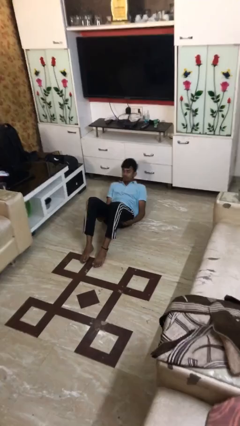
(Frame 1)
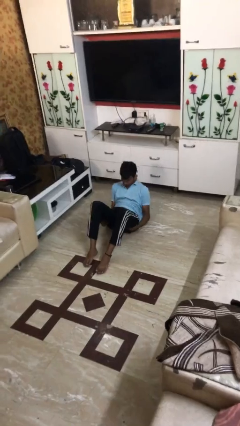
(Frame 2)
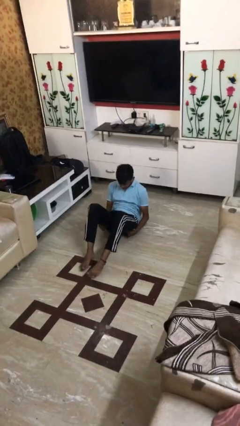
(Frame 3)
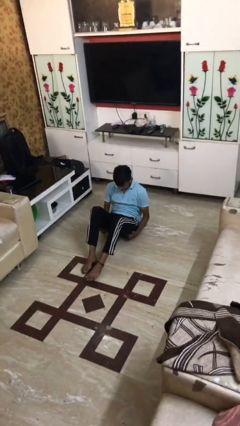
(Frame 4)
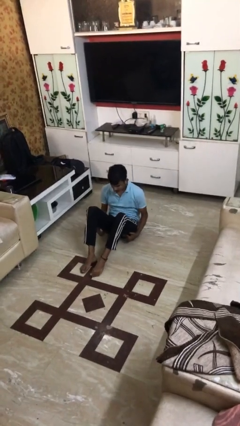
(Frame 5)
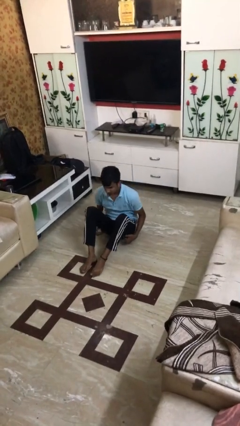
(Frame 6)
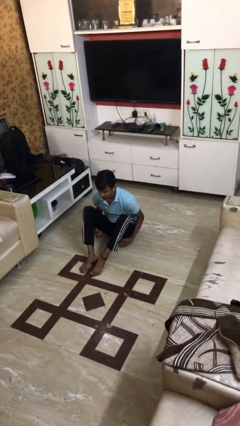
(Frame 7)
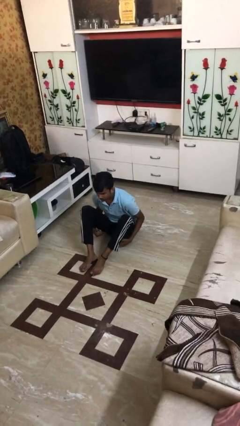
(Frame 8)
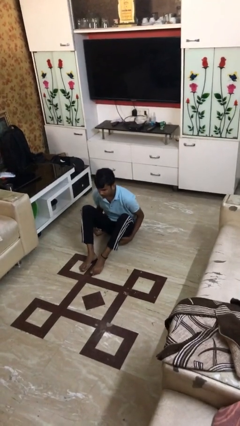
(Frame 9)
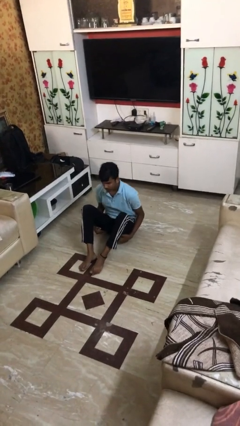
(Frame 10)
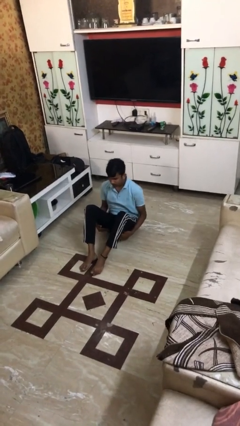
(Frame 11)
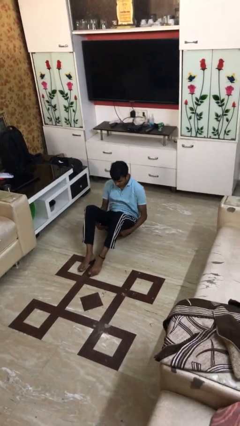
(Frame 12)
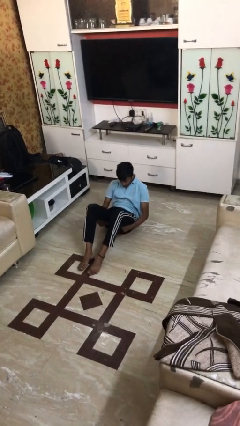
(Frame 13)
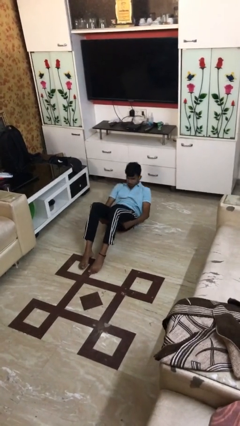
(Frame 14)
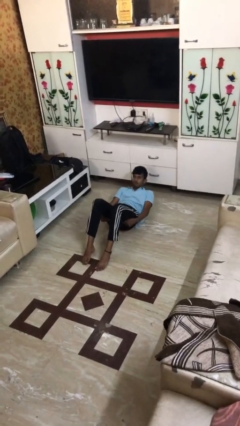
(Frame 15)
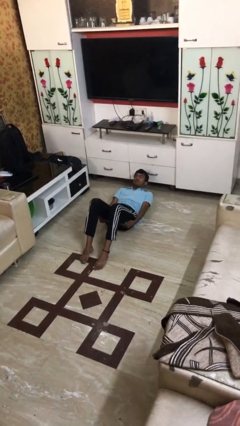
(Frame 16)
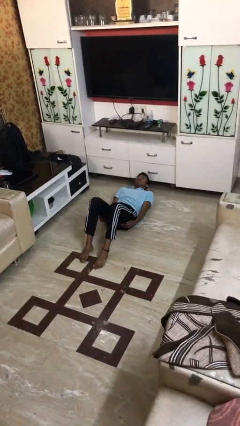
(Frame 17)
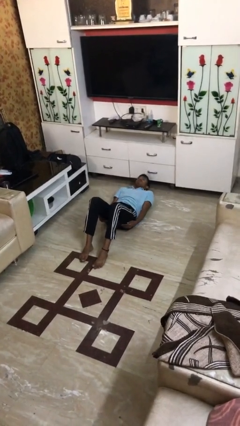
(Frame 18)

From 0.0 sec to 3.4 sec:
person exercises with situp

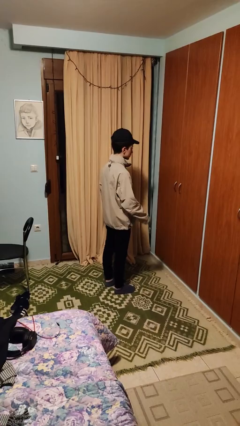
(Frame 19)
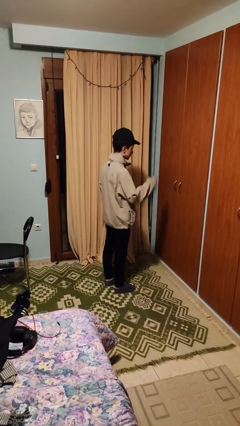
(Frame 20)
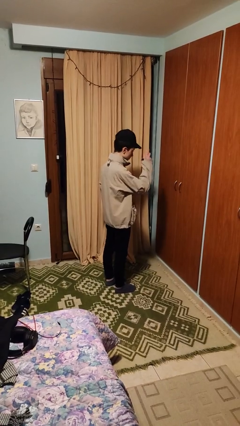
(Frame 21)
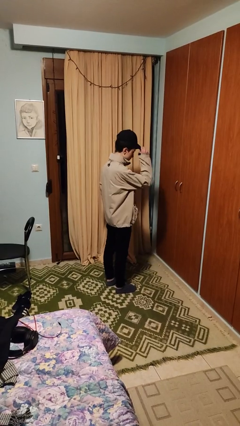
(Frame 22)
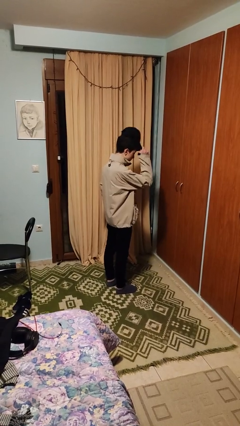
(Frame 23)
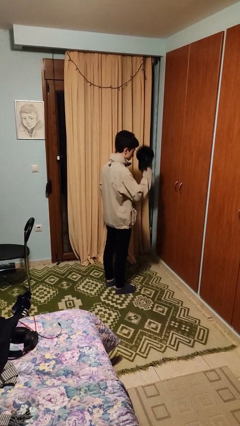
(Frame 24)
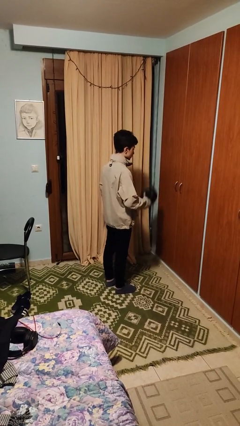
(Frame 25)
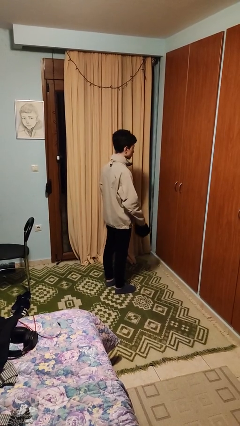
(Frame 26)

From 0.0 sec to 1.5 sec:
person takes off hat

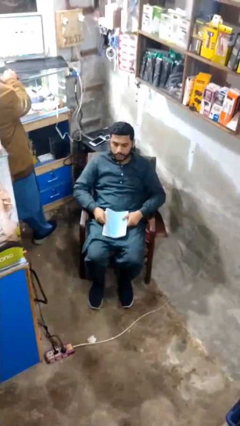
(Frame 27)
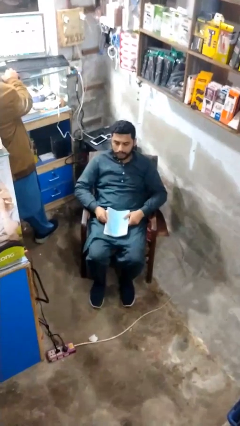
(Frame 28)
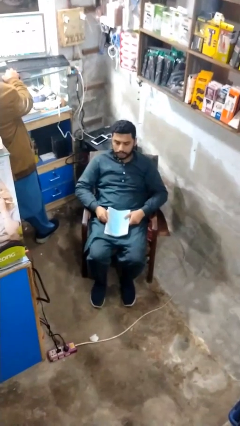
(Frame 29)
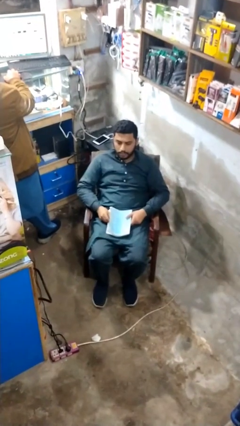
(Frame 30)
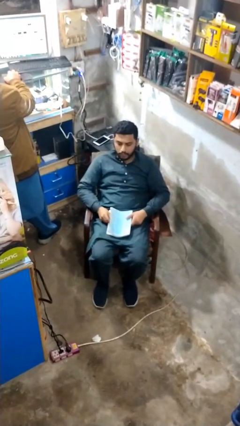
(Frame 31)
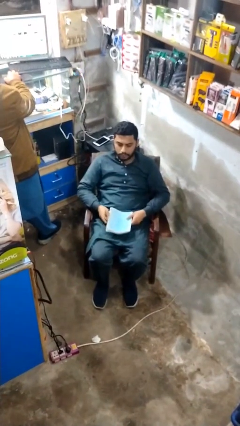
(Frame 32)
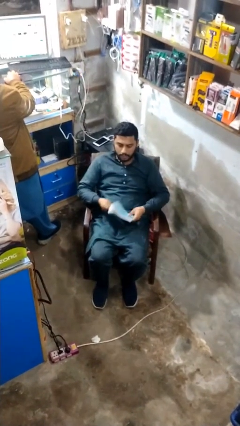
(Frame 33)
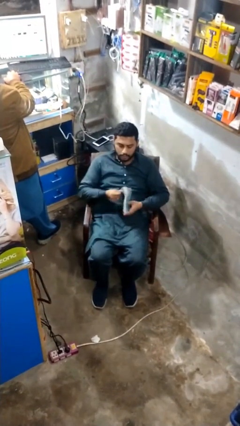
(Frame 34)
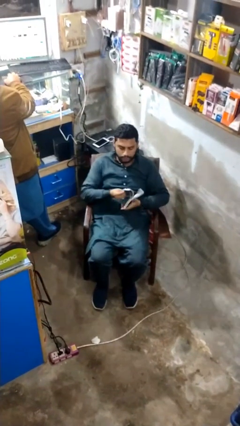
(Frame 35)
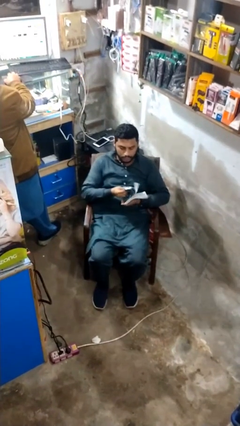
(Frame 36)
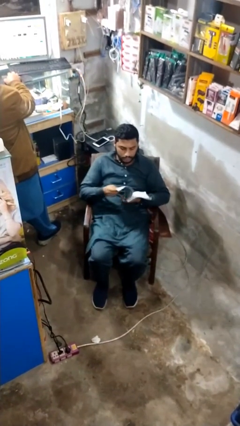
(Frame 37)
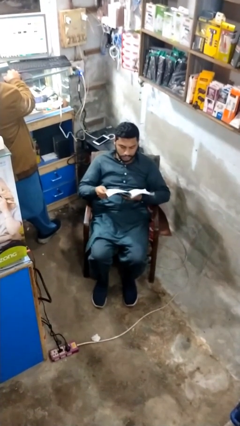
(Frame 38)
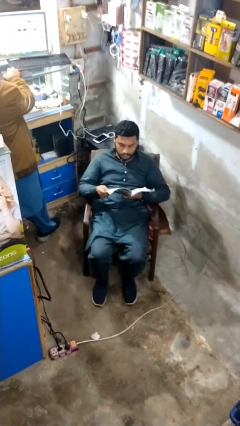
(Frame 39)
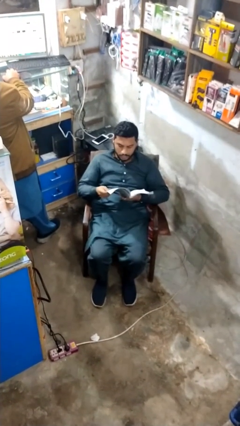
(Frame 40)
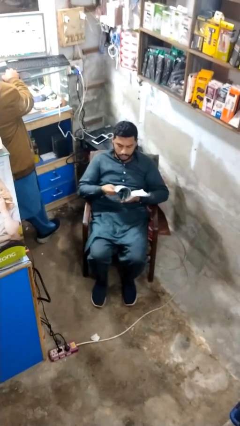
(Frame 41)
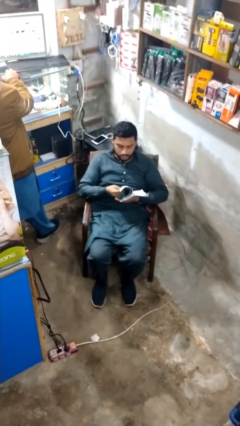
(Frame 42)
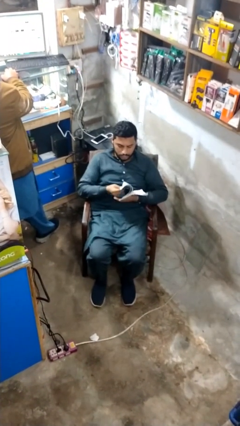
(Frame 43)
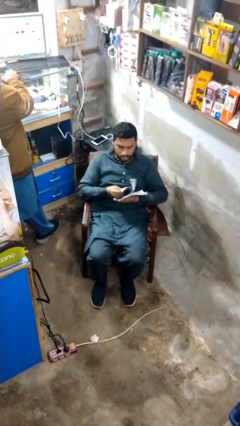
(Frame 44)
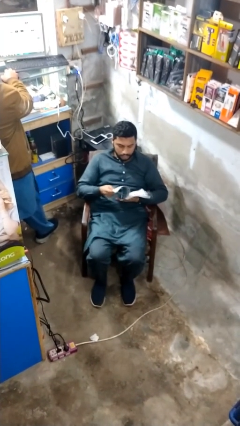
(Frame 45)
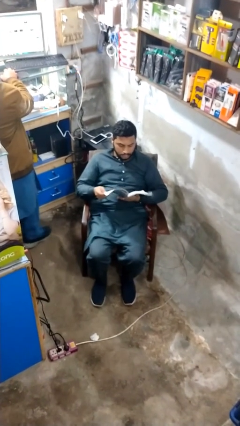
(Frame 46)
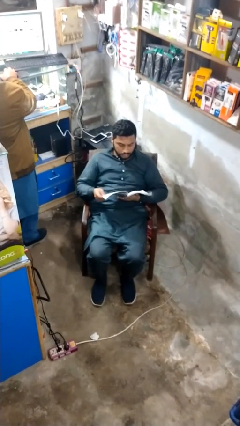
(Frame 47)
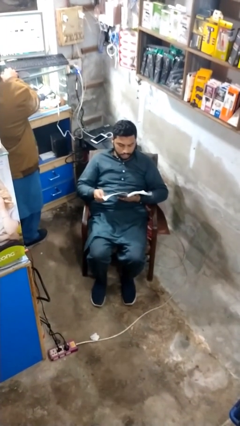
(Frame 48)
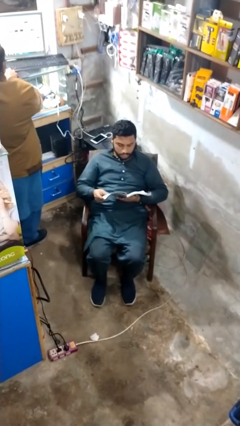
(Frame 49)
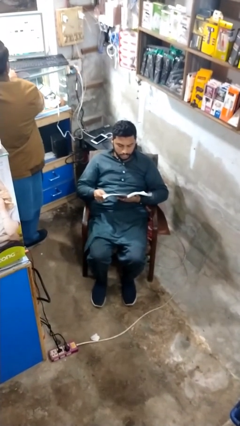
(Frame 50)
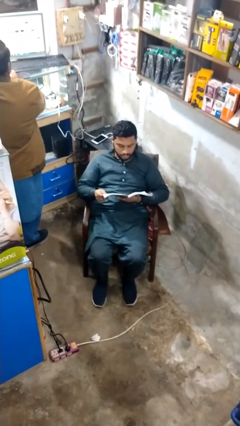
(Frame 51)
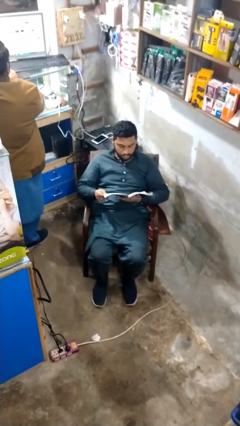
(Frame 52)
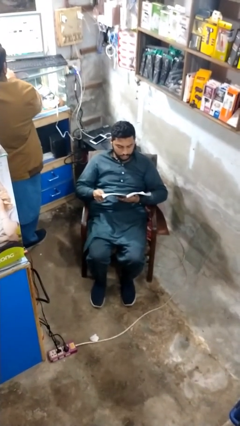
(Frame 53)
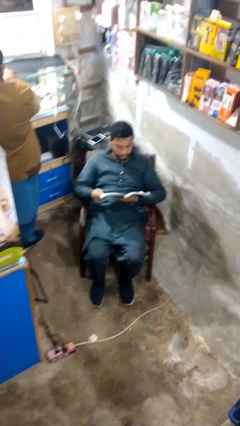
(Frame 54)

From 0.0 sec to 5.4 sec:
person reads document

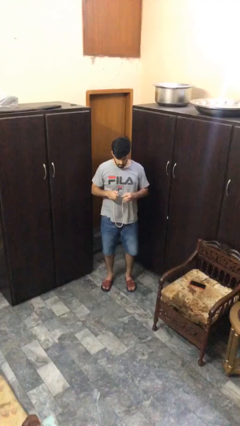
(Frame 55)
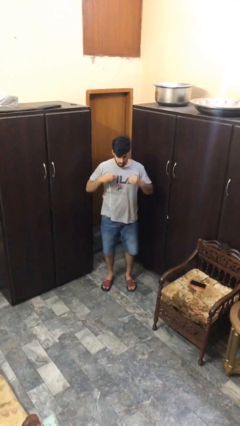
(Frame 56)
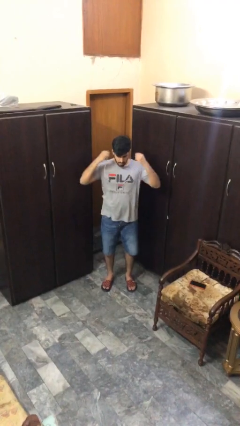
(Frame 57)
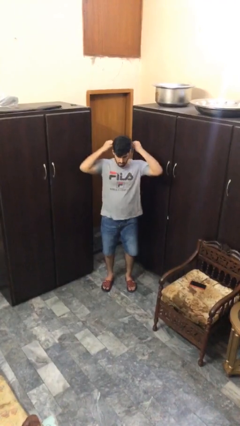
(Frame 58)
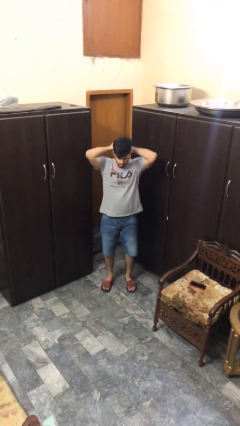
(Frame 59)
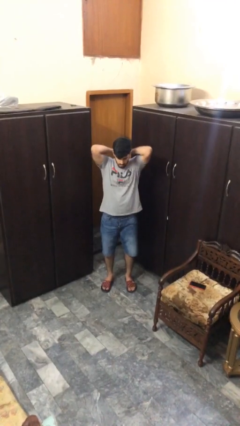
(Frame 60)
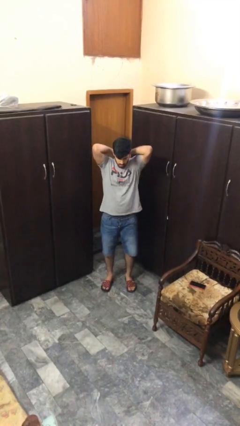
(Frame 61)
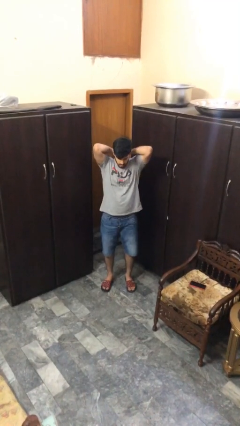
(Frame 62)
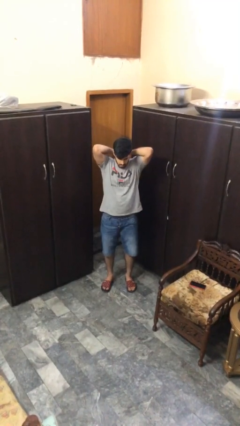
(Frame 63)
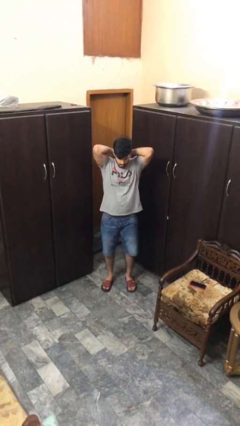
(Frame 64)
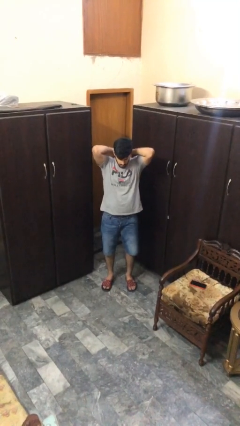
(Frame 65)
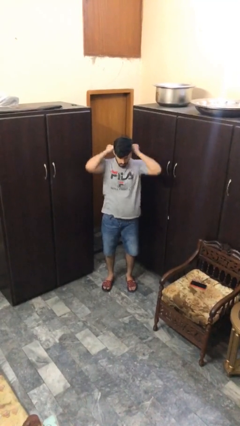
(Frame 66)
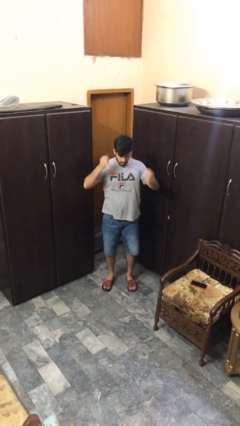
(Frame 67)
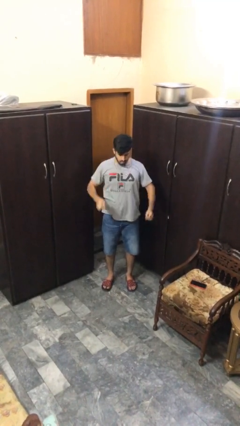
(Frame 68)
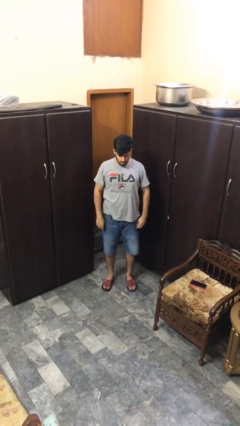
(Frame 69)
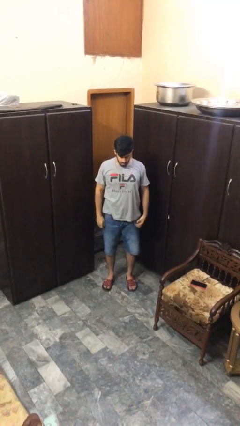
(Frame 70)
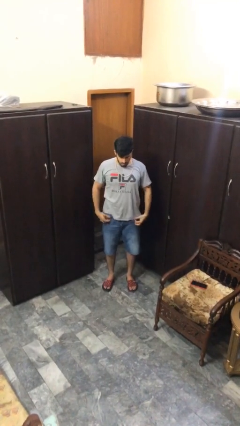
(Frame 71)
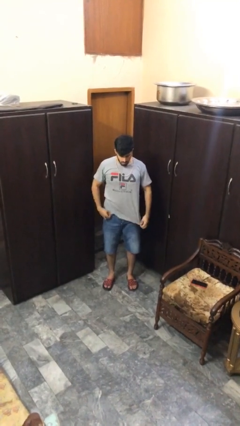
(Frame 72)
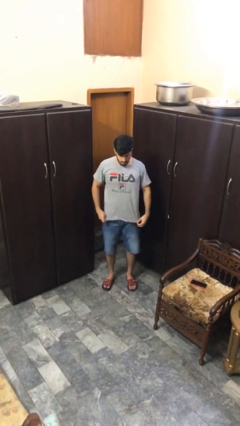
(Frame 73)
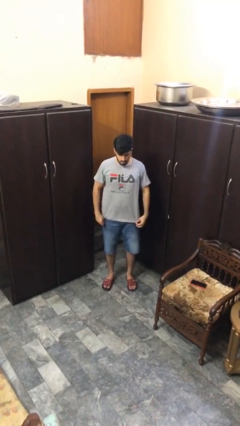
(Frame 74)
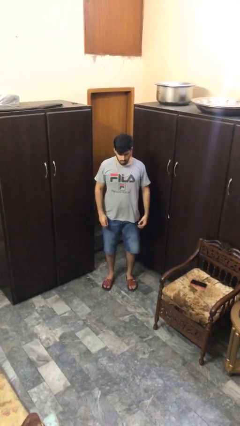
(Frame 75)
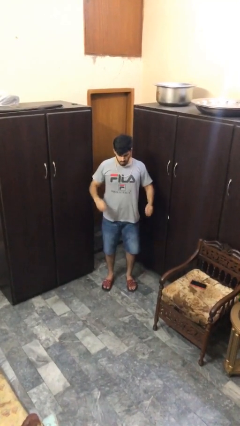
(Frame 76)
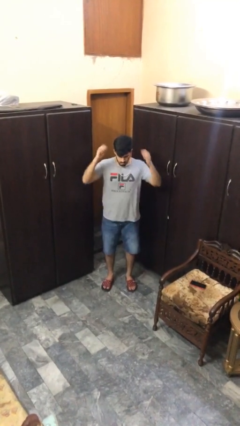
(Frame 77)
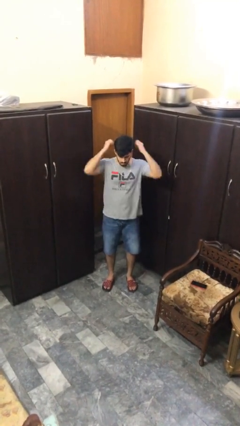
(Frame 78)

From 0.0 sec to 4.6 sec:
person puts on necklace

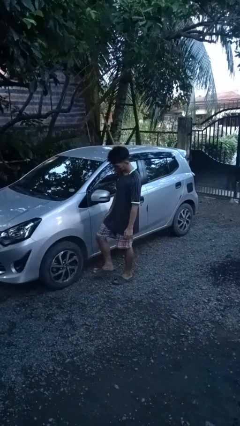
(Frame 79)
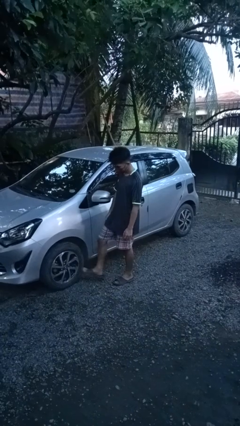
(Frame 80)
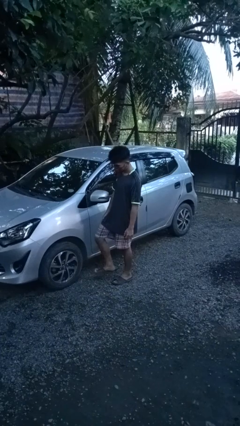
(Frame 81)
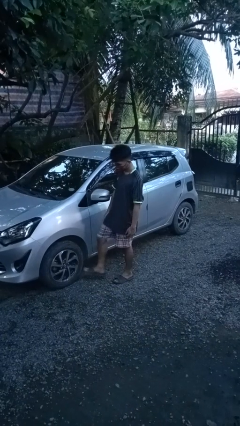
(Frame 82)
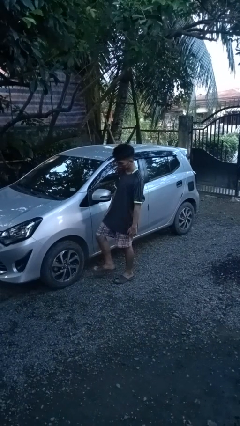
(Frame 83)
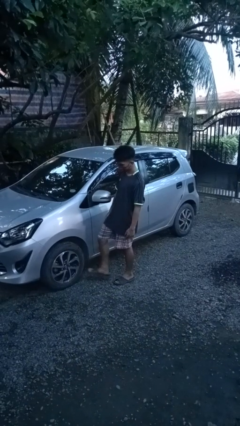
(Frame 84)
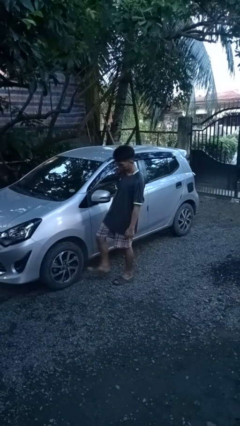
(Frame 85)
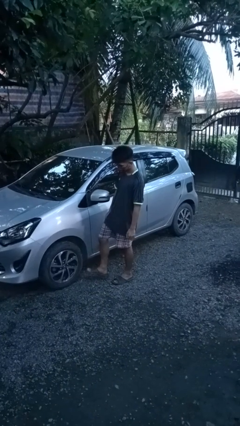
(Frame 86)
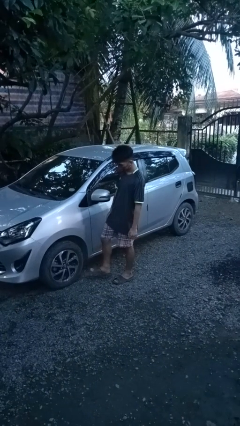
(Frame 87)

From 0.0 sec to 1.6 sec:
person kicks car tires

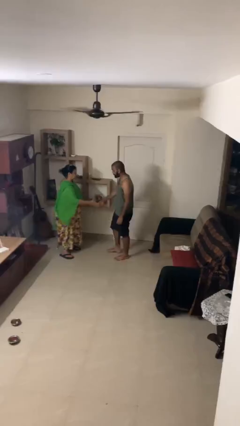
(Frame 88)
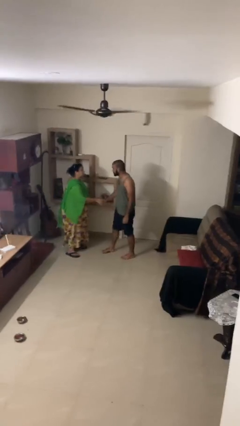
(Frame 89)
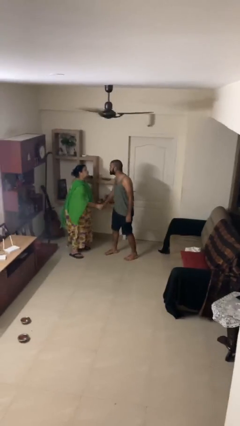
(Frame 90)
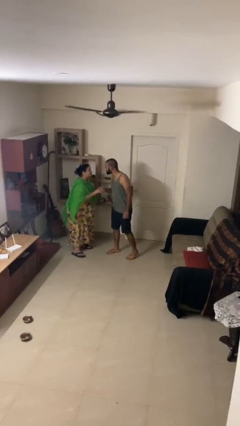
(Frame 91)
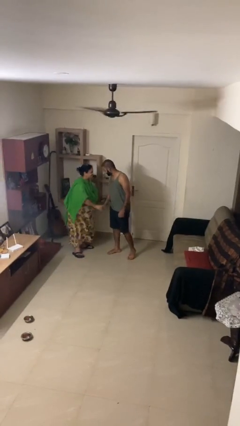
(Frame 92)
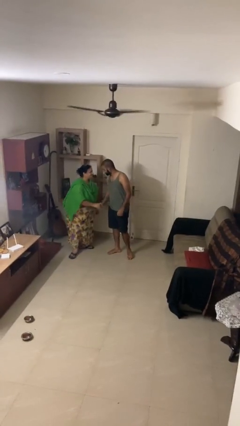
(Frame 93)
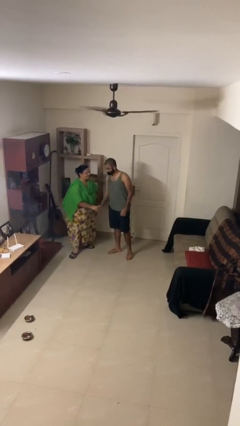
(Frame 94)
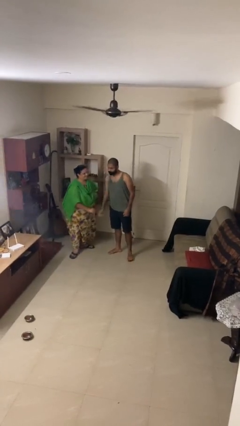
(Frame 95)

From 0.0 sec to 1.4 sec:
person shakes hand
